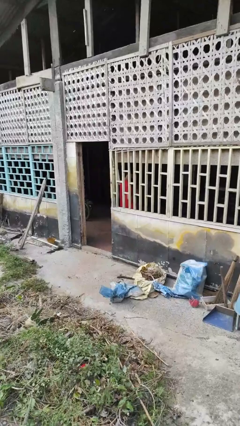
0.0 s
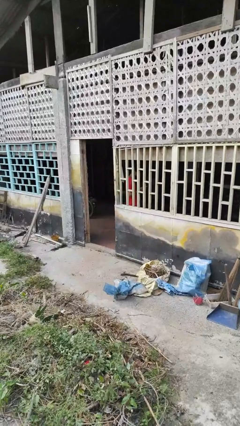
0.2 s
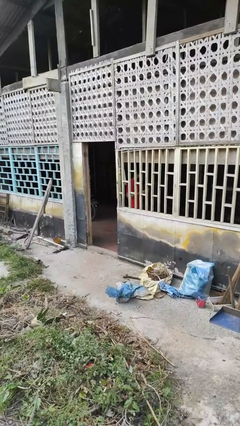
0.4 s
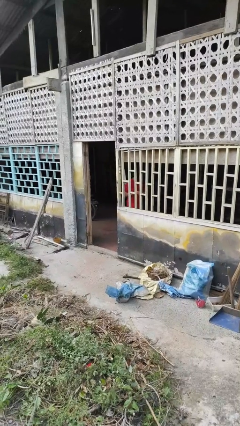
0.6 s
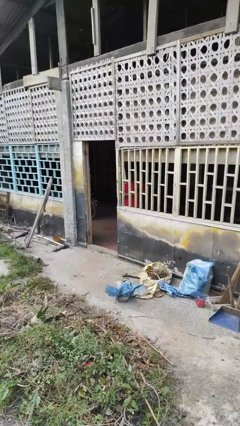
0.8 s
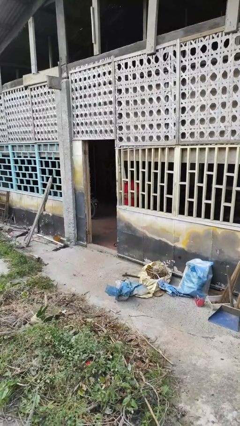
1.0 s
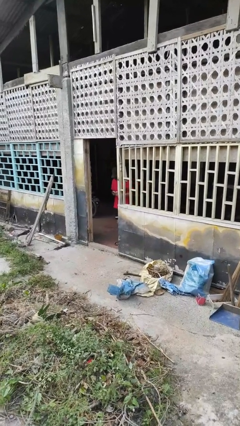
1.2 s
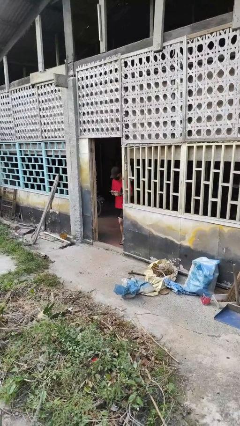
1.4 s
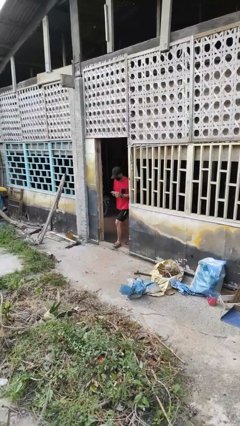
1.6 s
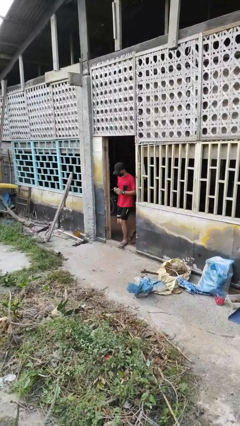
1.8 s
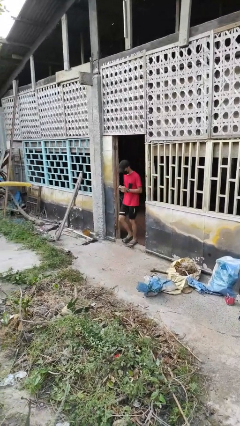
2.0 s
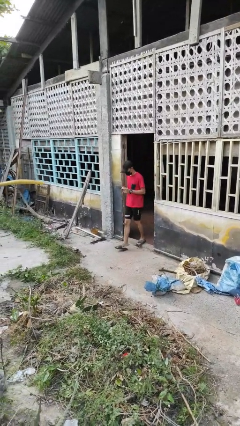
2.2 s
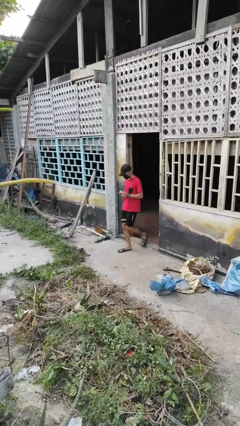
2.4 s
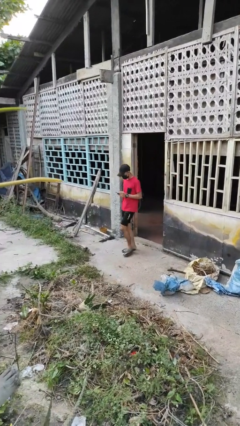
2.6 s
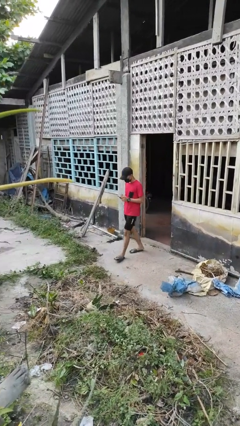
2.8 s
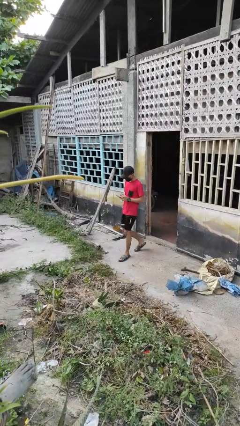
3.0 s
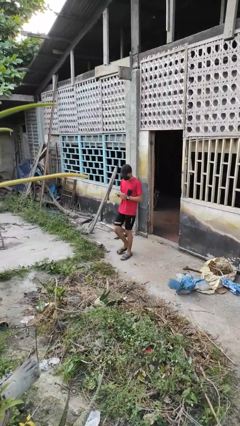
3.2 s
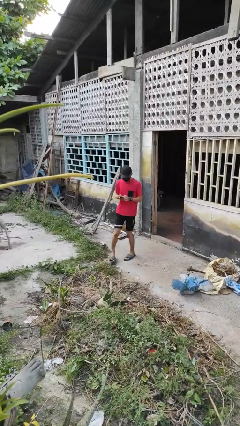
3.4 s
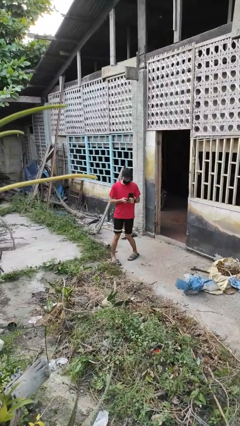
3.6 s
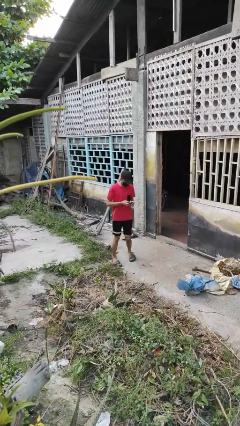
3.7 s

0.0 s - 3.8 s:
person exits scene through structure

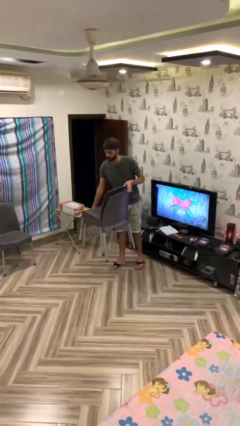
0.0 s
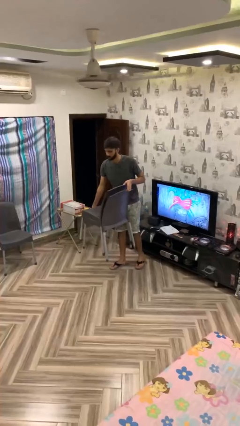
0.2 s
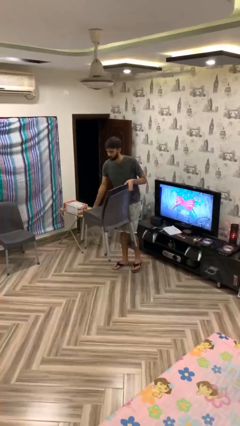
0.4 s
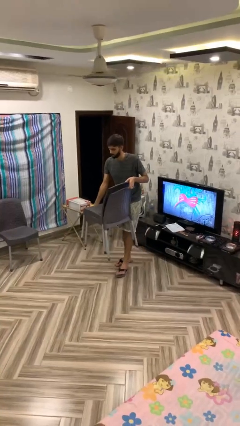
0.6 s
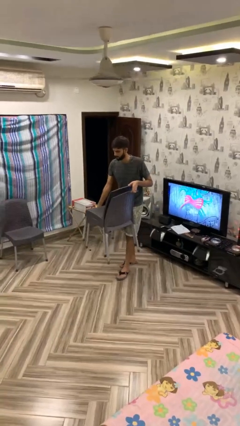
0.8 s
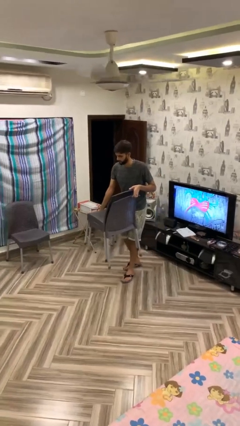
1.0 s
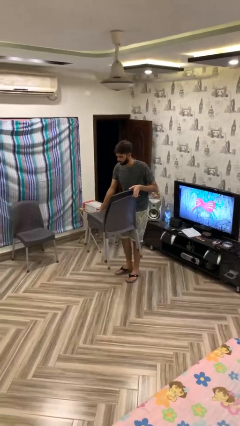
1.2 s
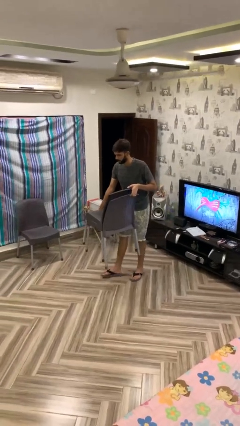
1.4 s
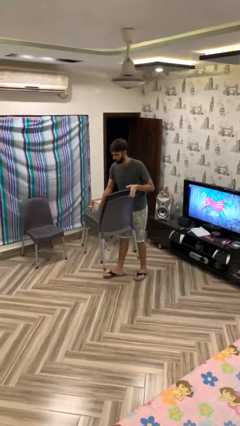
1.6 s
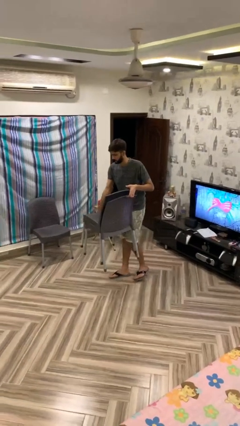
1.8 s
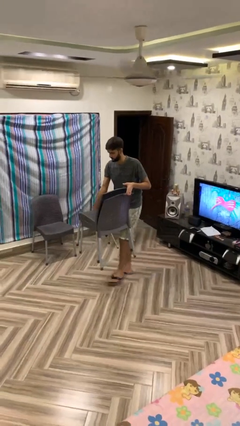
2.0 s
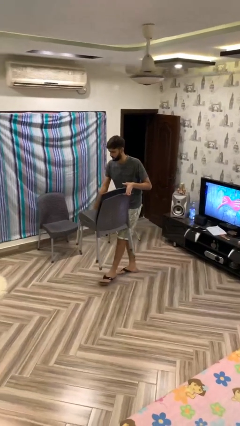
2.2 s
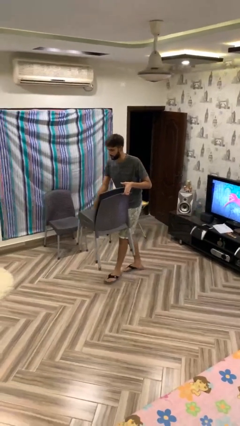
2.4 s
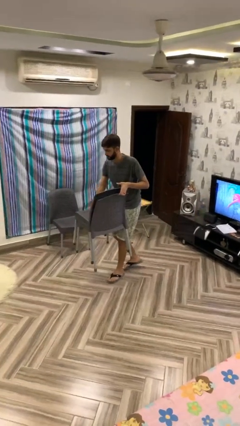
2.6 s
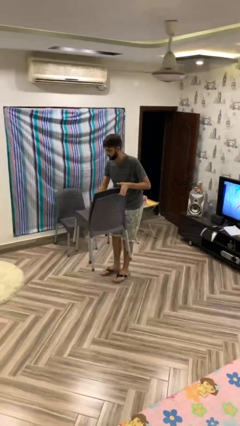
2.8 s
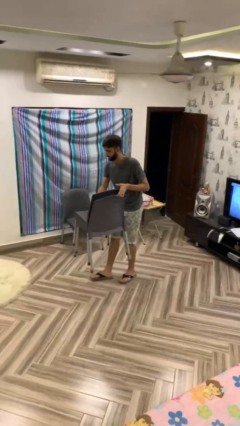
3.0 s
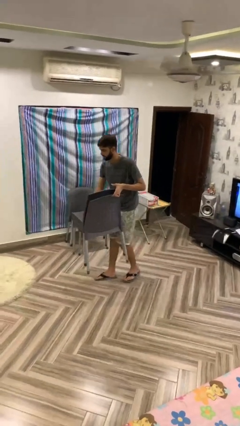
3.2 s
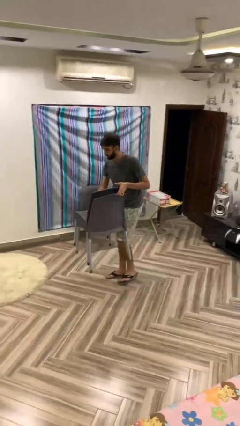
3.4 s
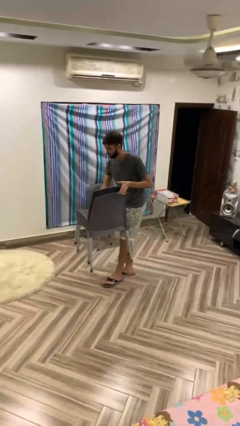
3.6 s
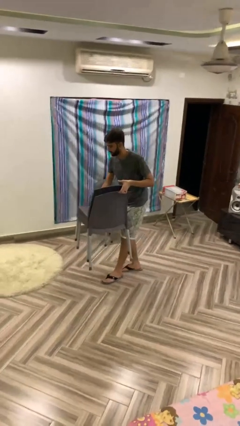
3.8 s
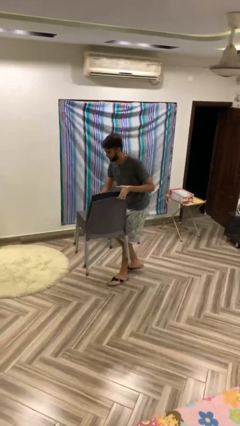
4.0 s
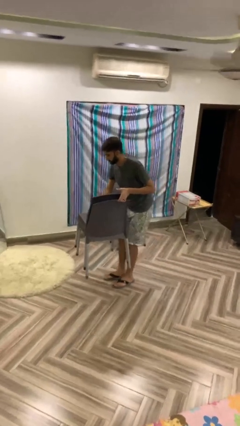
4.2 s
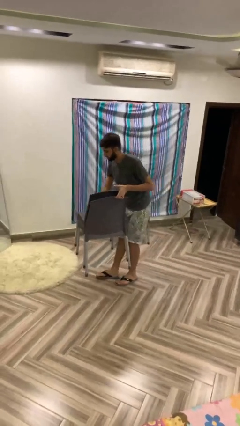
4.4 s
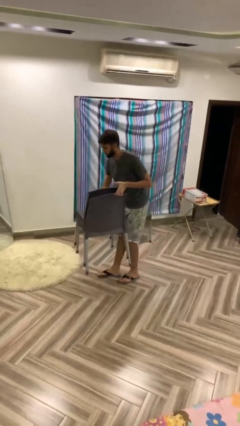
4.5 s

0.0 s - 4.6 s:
person carries heavy object

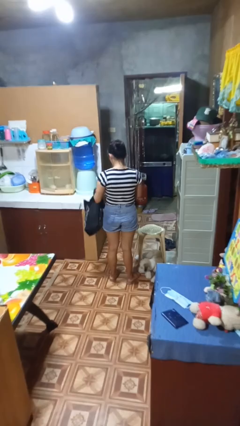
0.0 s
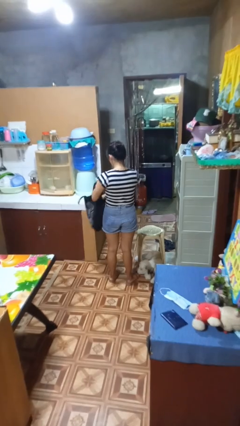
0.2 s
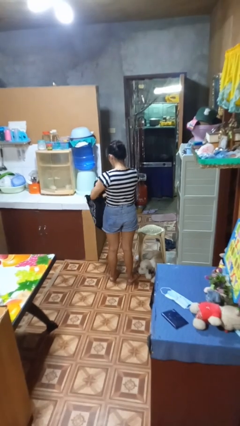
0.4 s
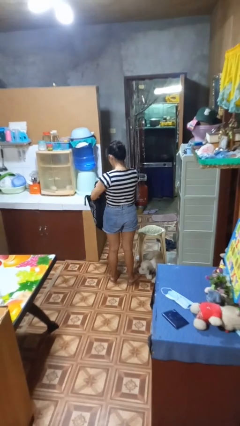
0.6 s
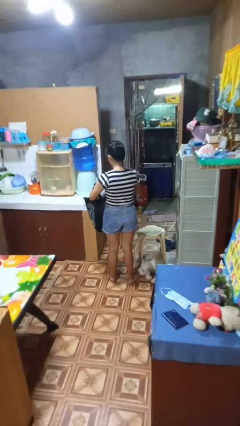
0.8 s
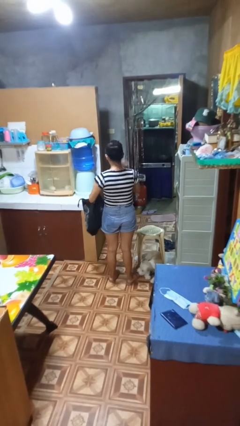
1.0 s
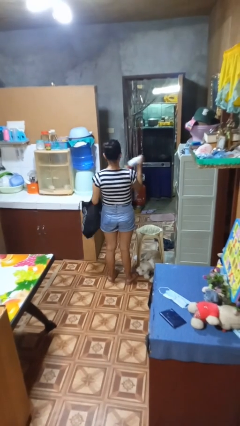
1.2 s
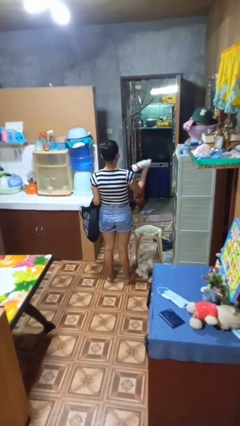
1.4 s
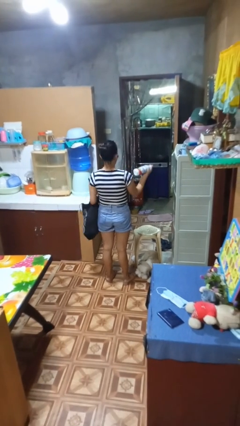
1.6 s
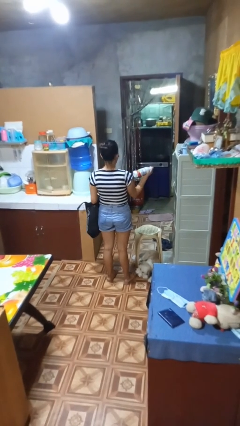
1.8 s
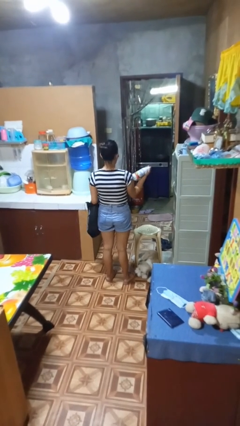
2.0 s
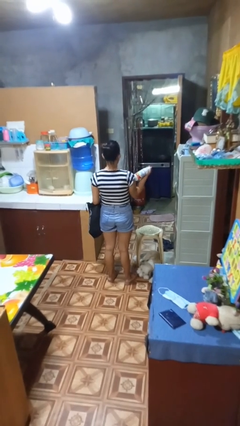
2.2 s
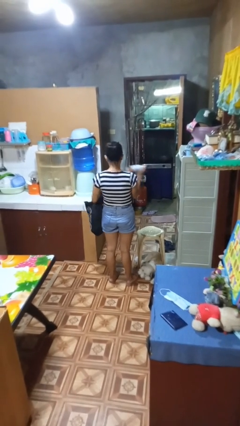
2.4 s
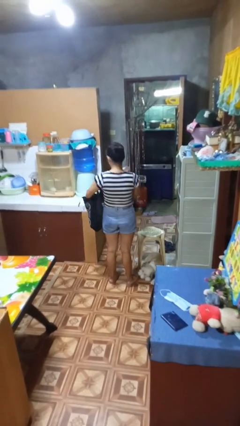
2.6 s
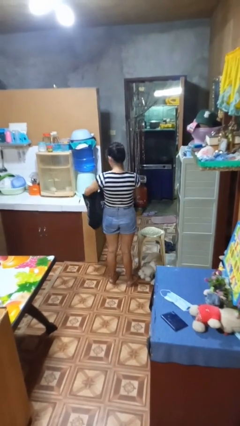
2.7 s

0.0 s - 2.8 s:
person takes object from bag

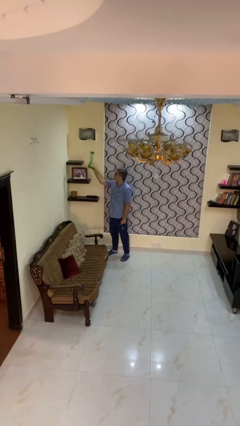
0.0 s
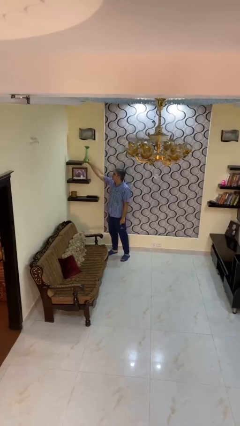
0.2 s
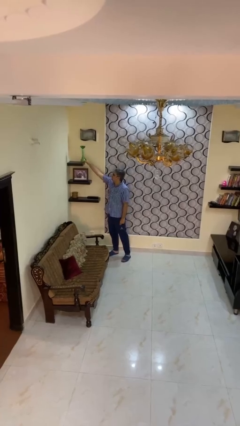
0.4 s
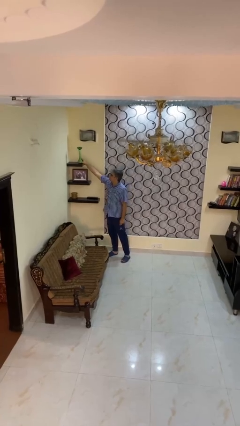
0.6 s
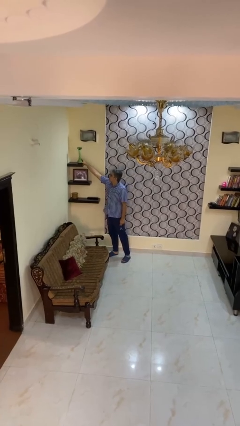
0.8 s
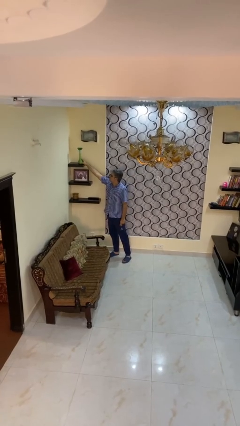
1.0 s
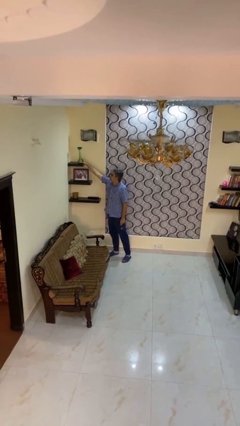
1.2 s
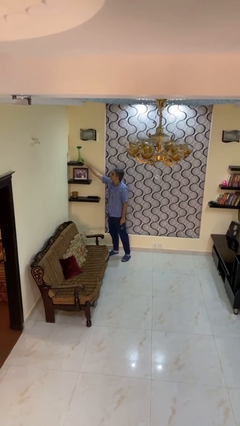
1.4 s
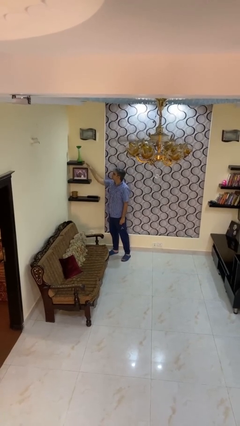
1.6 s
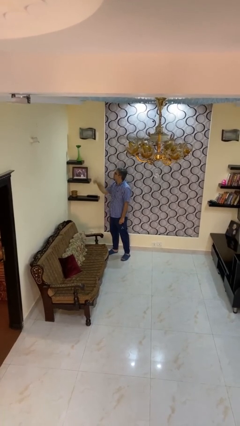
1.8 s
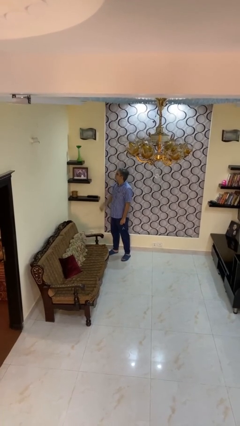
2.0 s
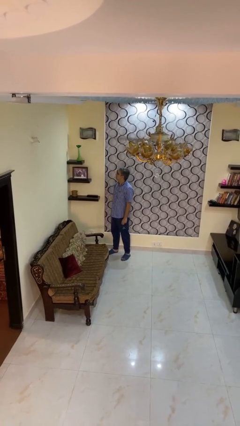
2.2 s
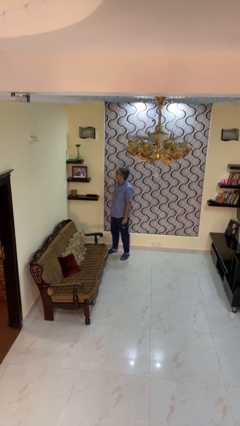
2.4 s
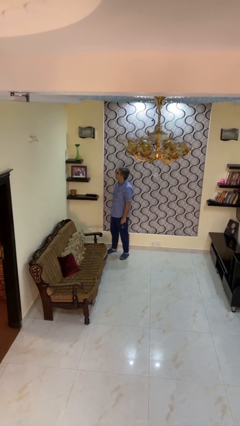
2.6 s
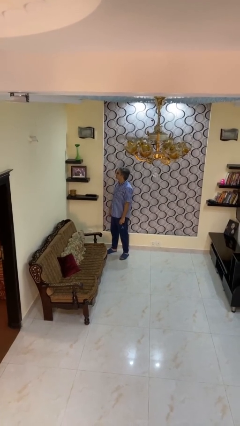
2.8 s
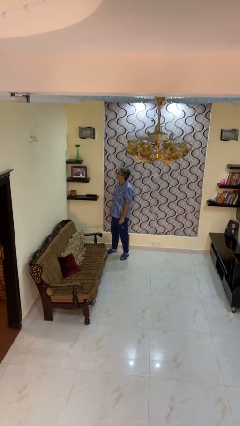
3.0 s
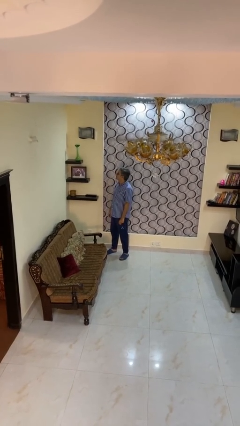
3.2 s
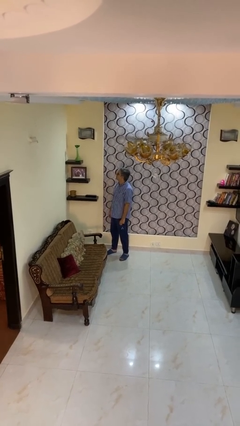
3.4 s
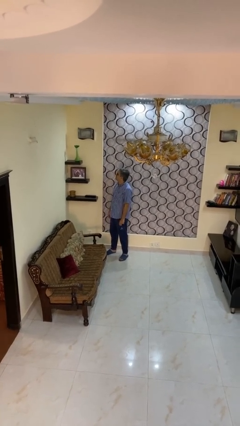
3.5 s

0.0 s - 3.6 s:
person puts down object on shelf

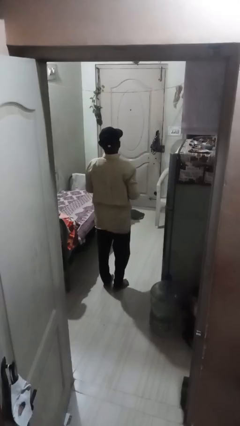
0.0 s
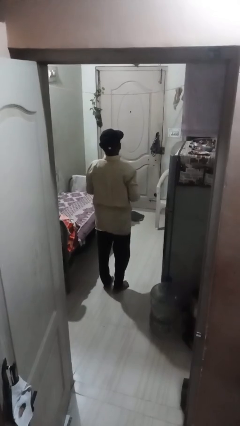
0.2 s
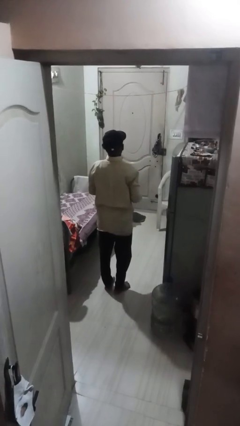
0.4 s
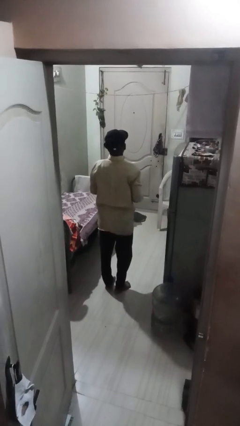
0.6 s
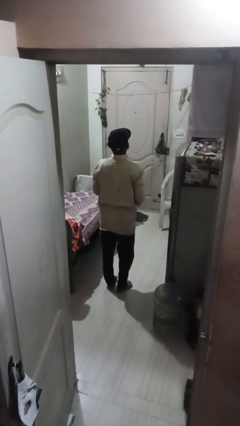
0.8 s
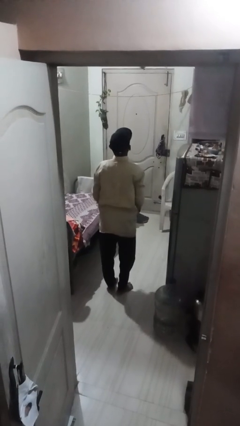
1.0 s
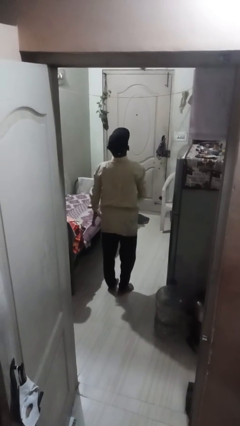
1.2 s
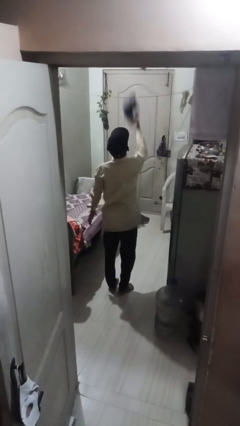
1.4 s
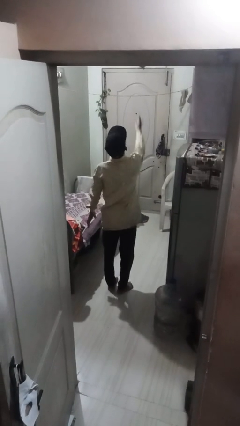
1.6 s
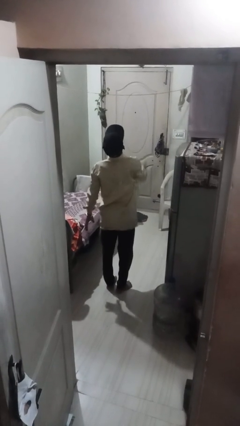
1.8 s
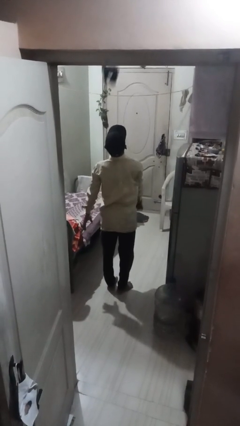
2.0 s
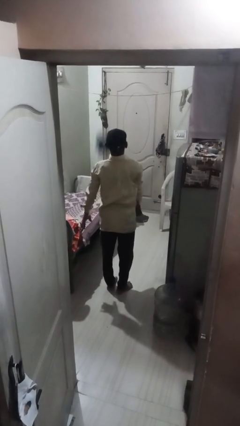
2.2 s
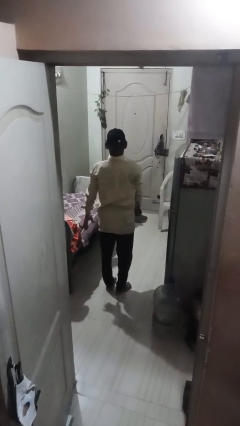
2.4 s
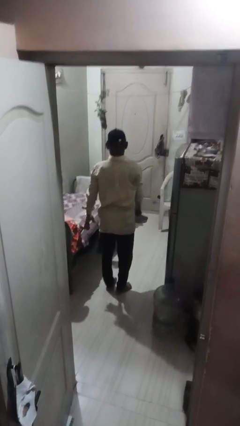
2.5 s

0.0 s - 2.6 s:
person throws object into air

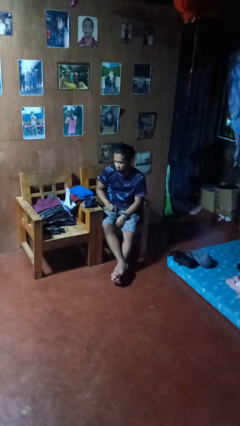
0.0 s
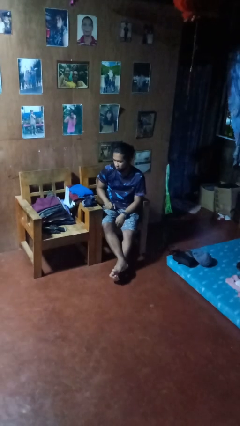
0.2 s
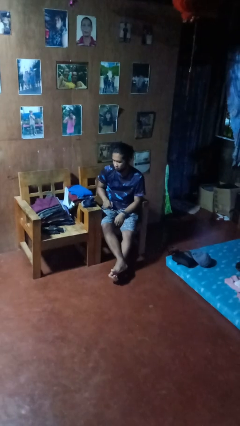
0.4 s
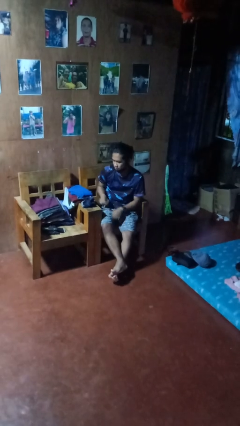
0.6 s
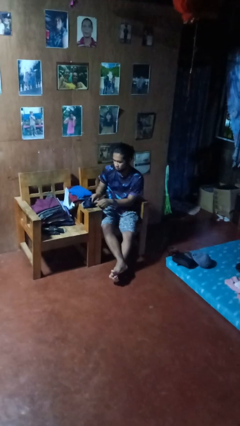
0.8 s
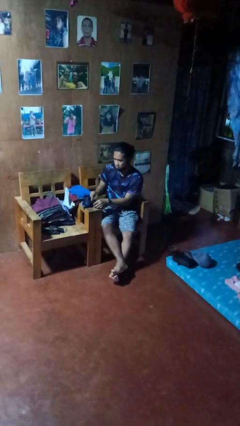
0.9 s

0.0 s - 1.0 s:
person folds socks
